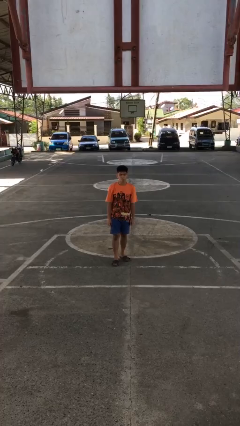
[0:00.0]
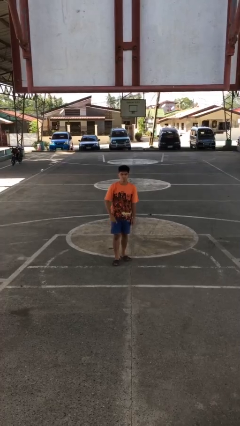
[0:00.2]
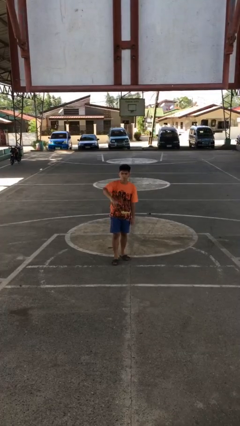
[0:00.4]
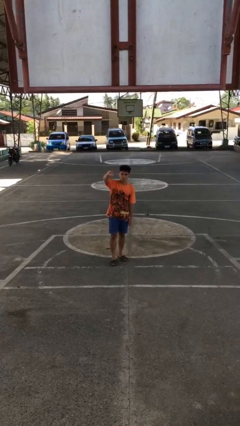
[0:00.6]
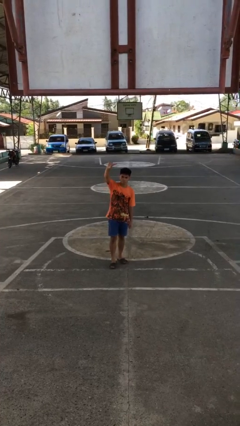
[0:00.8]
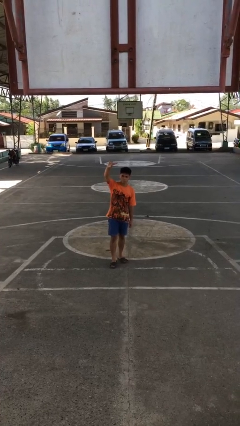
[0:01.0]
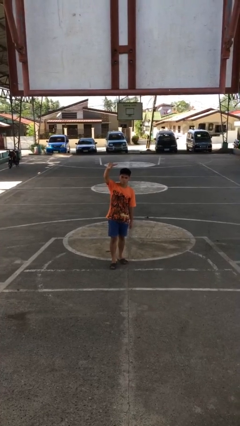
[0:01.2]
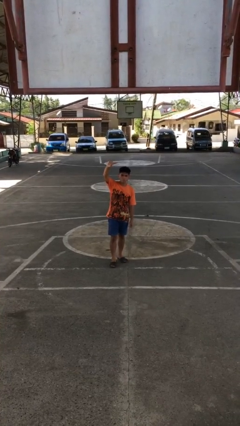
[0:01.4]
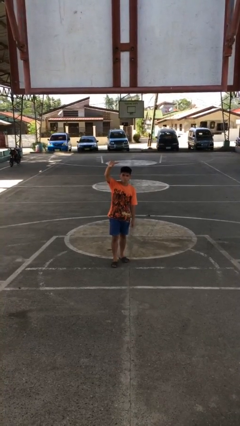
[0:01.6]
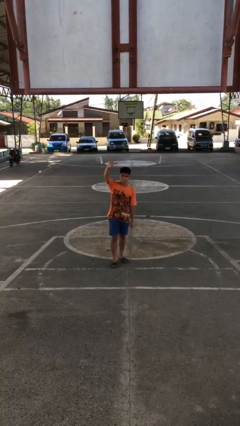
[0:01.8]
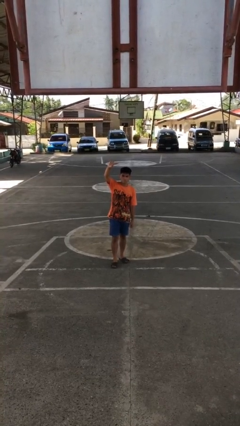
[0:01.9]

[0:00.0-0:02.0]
person gestures swipe up

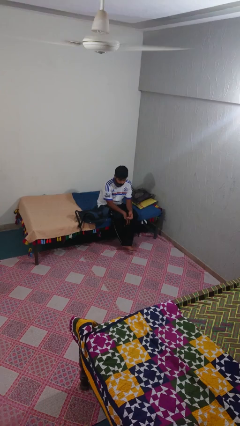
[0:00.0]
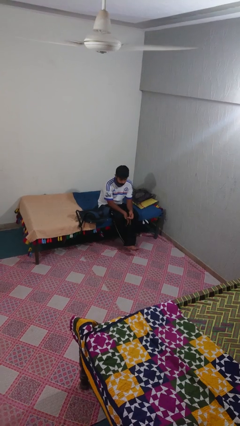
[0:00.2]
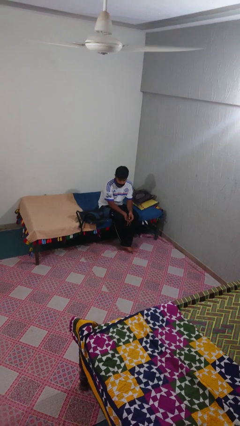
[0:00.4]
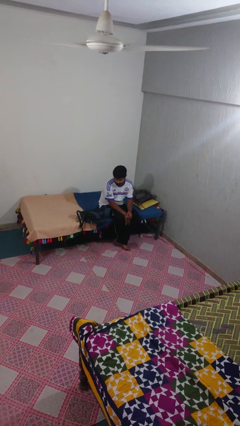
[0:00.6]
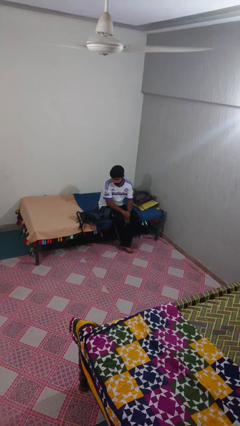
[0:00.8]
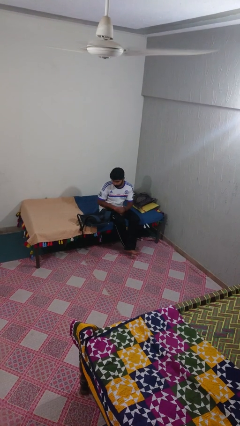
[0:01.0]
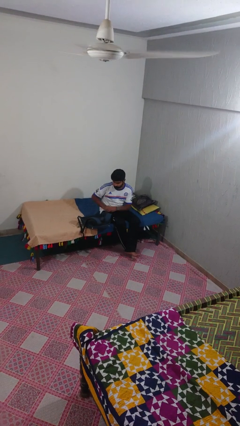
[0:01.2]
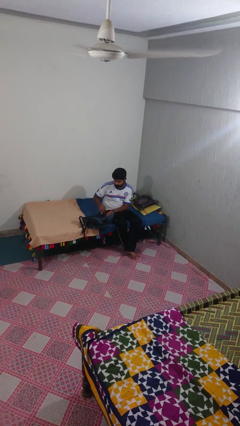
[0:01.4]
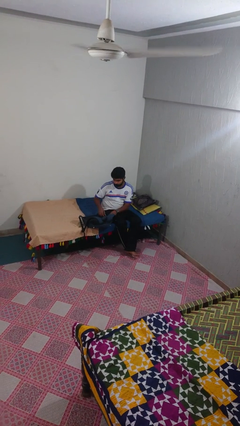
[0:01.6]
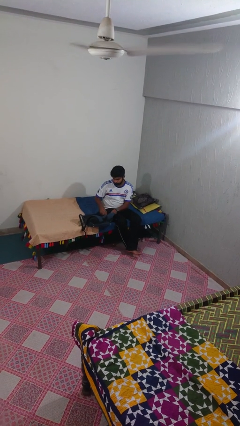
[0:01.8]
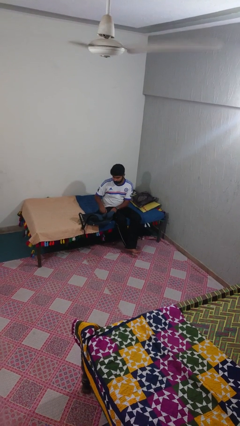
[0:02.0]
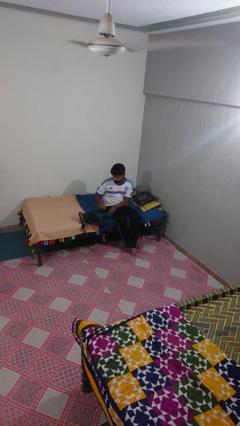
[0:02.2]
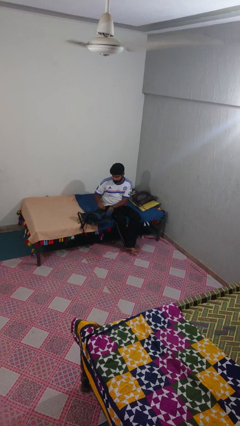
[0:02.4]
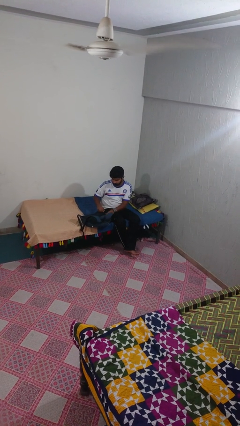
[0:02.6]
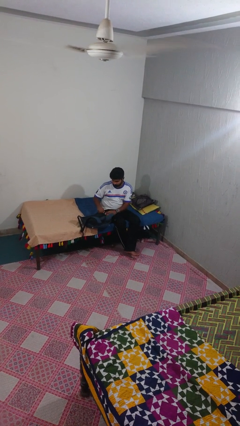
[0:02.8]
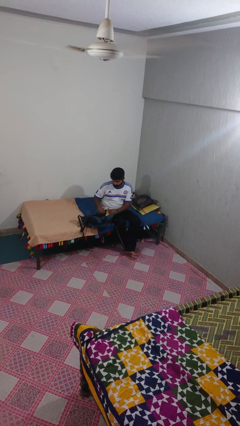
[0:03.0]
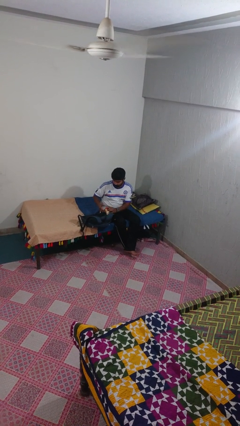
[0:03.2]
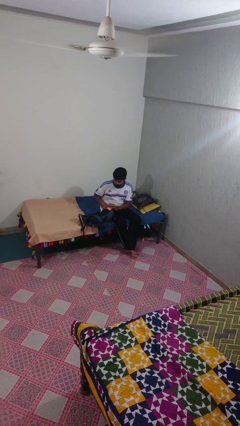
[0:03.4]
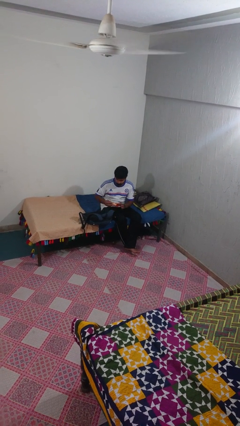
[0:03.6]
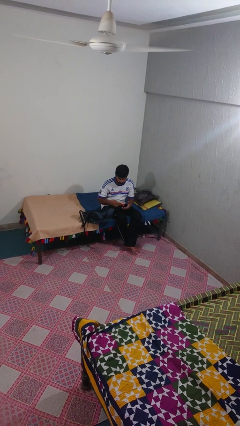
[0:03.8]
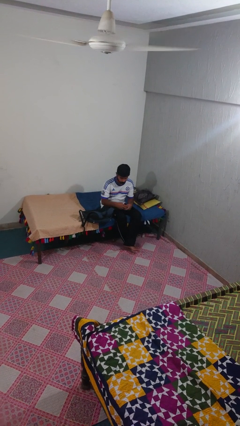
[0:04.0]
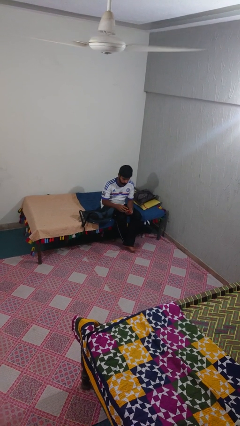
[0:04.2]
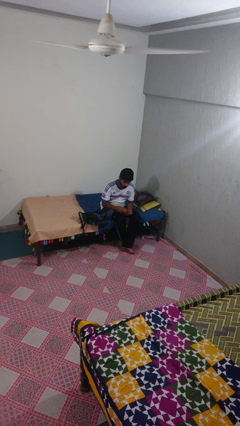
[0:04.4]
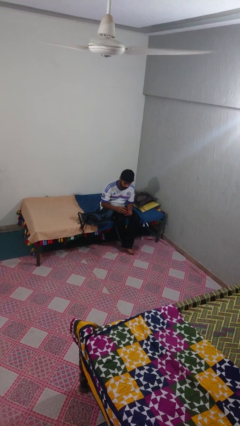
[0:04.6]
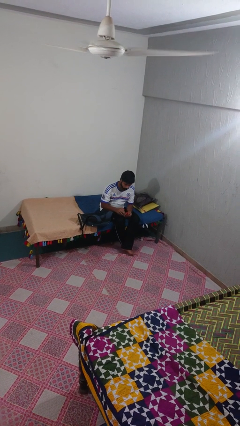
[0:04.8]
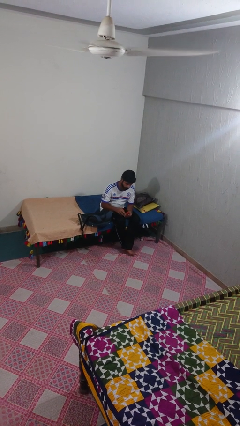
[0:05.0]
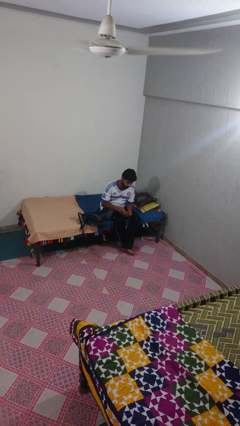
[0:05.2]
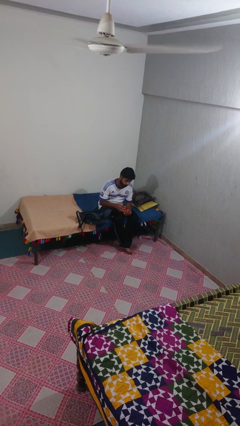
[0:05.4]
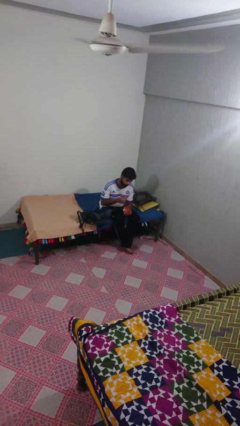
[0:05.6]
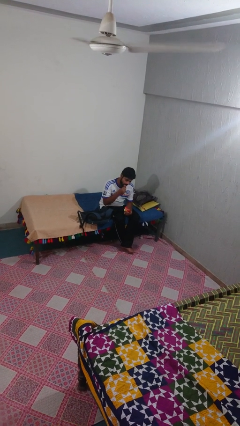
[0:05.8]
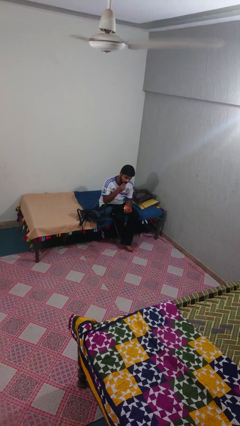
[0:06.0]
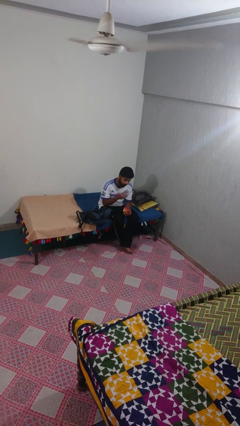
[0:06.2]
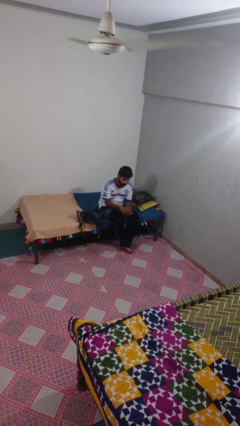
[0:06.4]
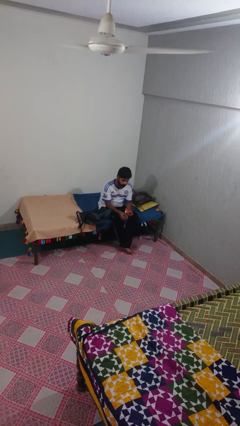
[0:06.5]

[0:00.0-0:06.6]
person eats snack from bag

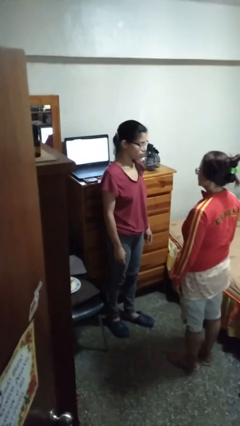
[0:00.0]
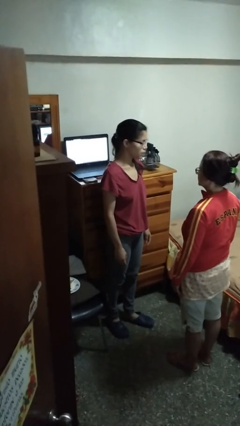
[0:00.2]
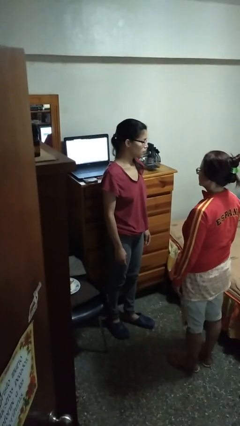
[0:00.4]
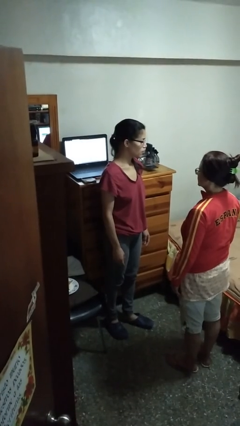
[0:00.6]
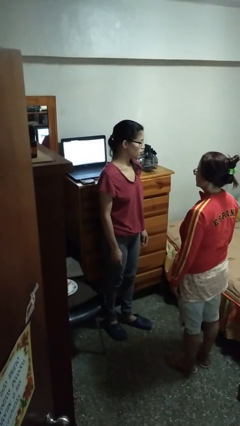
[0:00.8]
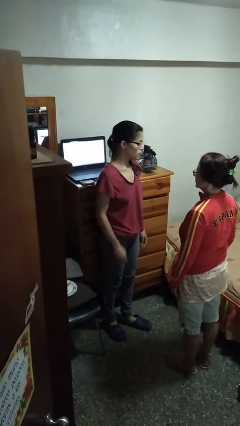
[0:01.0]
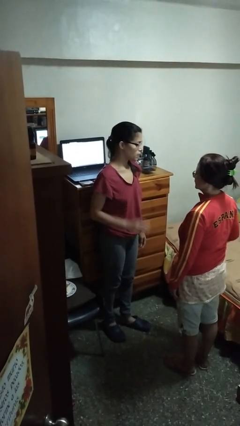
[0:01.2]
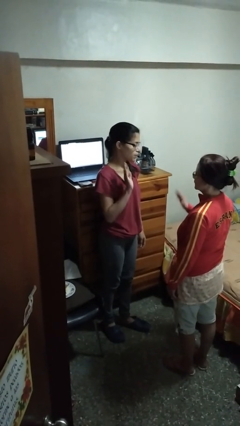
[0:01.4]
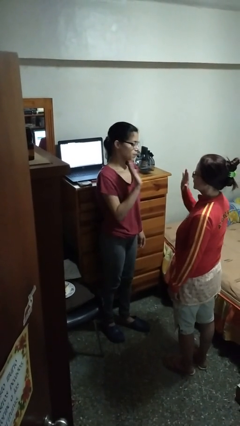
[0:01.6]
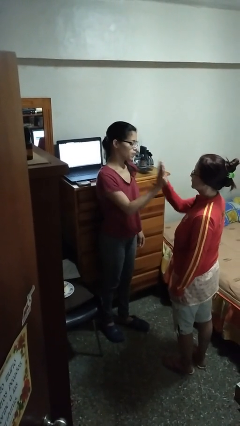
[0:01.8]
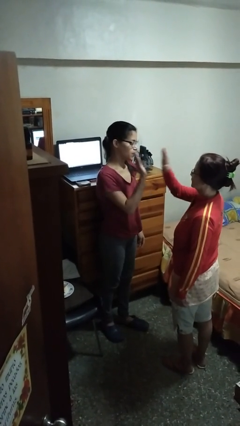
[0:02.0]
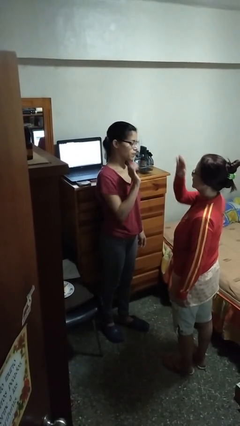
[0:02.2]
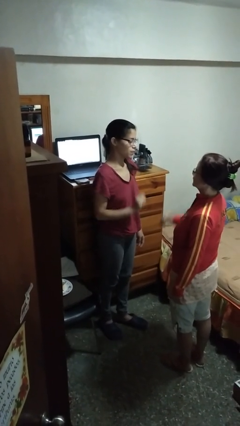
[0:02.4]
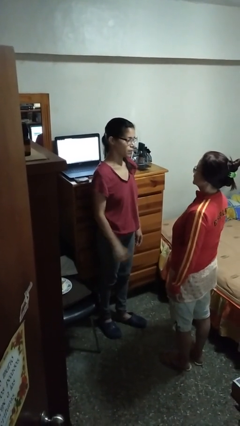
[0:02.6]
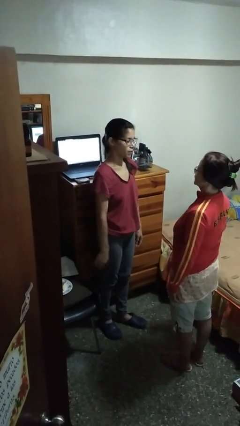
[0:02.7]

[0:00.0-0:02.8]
person highfives hand

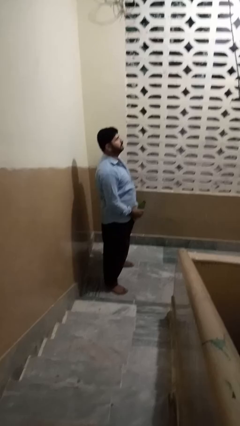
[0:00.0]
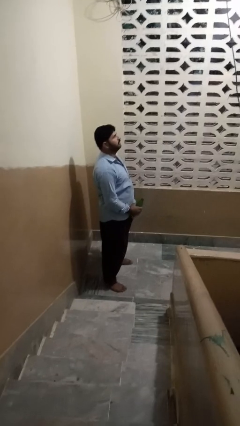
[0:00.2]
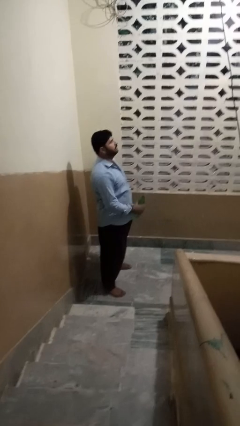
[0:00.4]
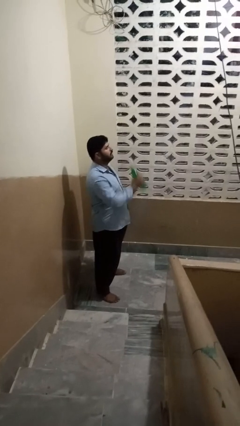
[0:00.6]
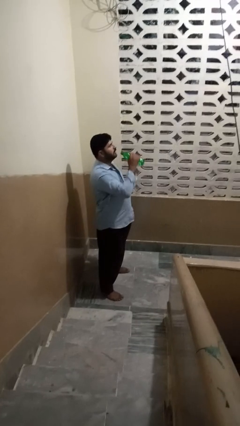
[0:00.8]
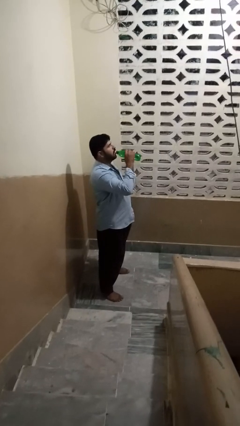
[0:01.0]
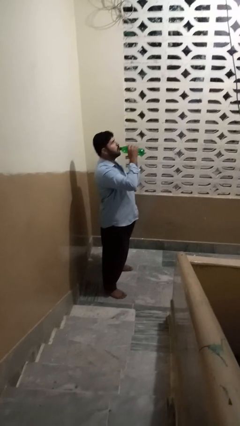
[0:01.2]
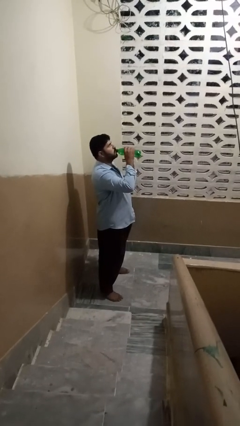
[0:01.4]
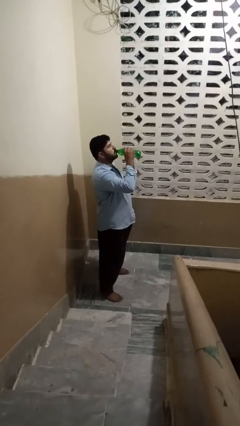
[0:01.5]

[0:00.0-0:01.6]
person drinks from bottle

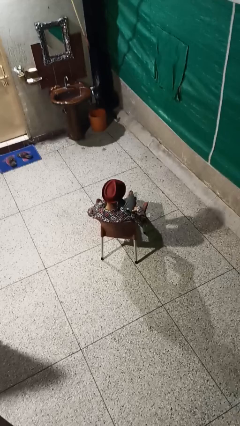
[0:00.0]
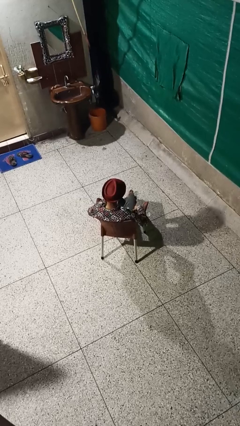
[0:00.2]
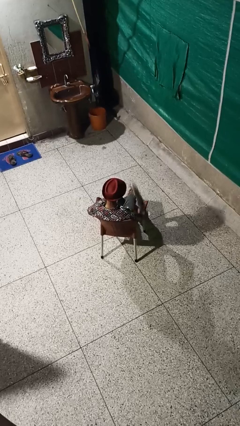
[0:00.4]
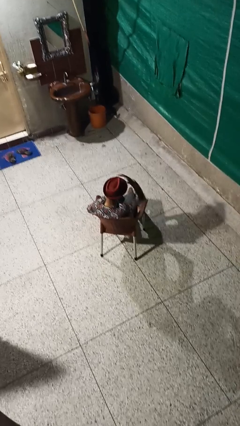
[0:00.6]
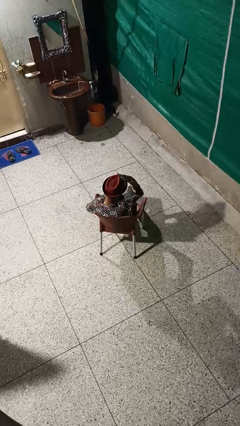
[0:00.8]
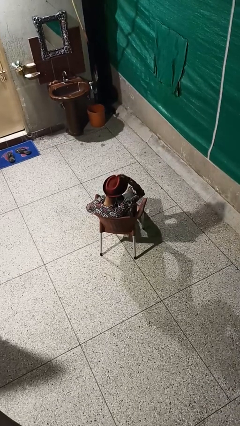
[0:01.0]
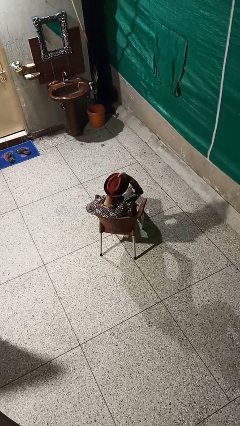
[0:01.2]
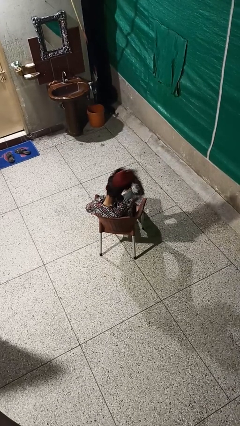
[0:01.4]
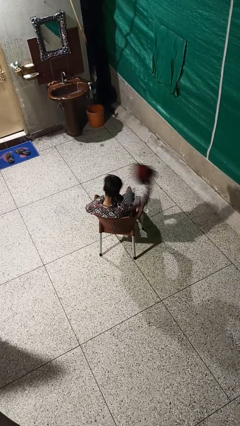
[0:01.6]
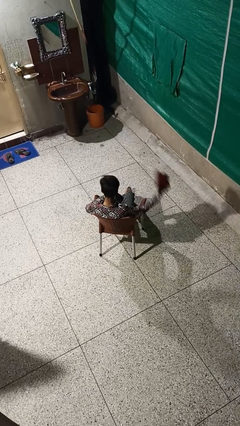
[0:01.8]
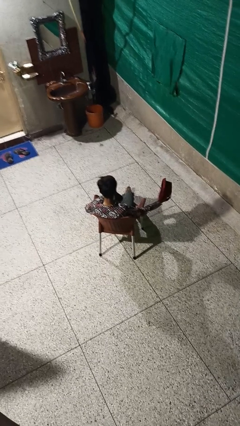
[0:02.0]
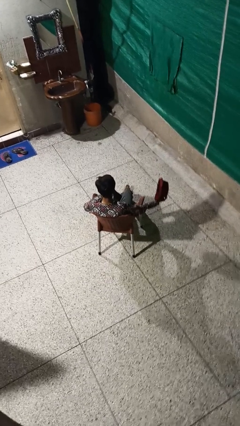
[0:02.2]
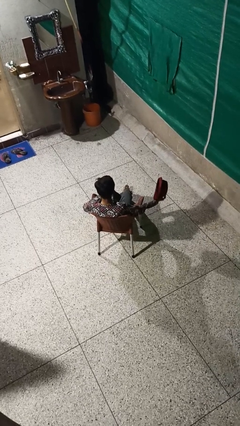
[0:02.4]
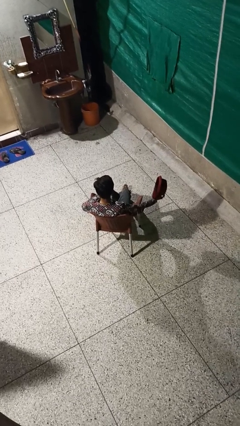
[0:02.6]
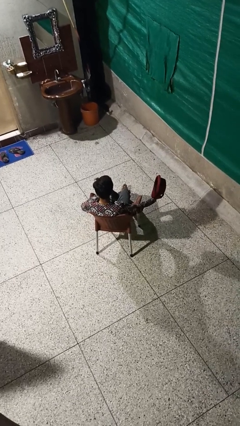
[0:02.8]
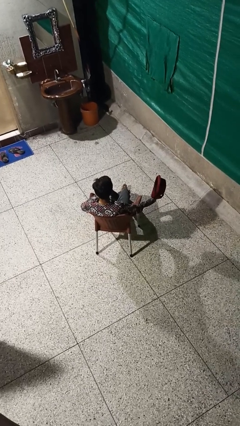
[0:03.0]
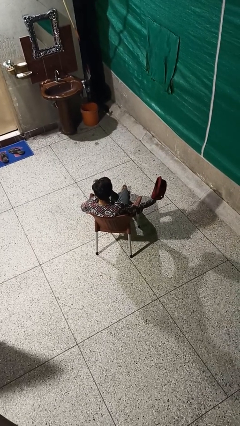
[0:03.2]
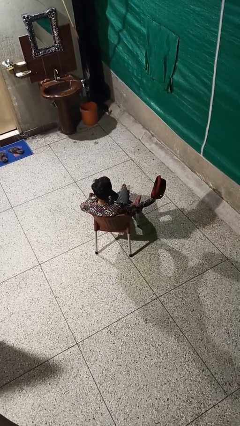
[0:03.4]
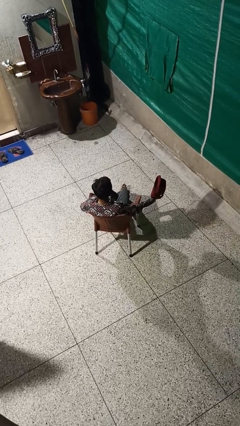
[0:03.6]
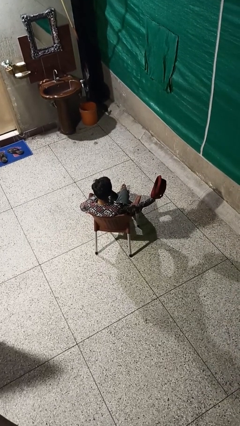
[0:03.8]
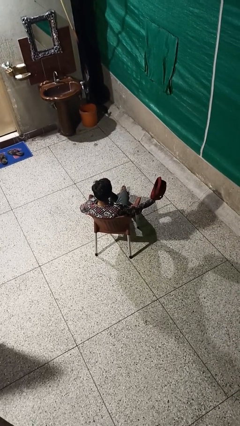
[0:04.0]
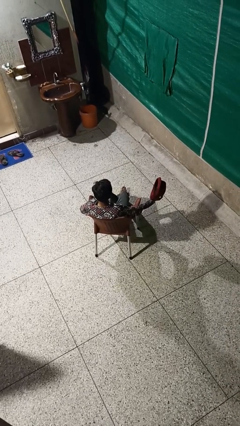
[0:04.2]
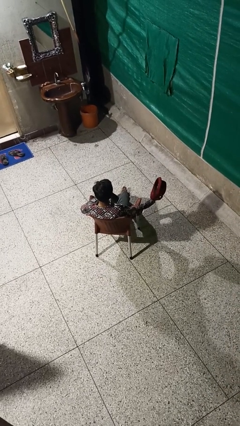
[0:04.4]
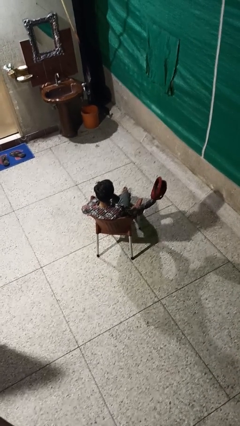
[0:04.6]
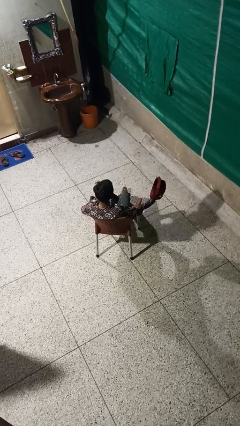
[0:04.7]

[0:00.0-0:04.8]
person takes off hat

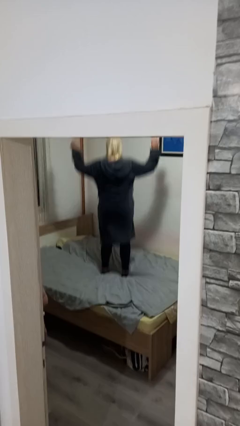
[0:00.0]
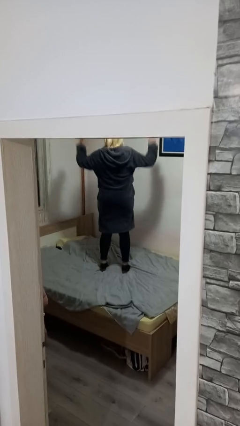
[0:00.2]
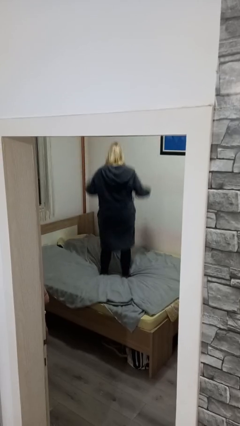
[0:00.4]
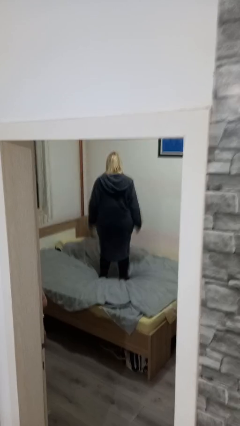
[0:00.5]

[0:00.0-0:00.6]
person jumps on bed
